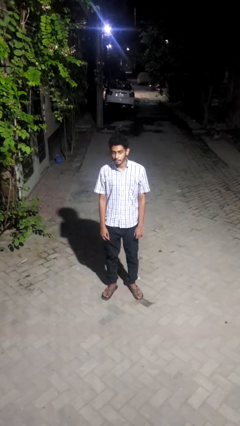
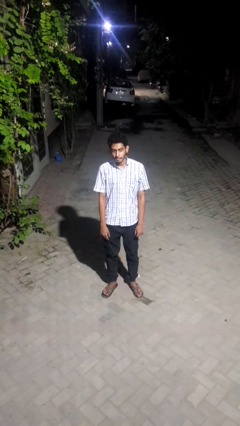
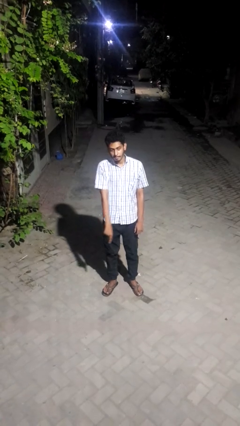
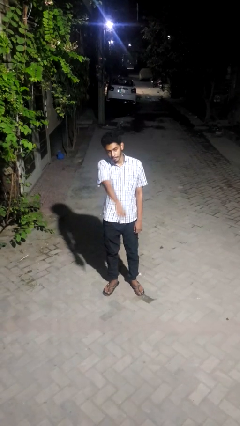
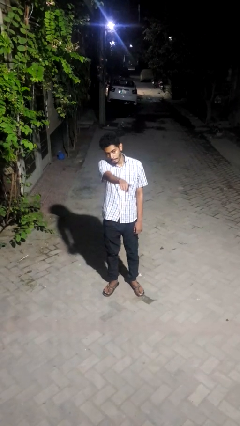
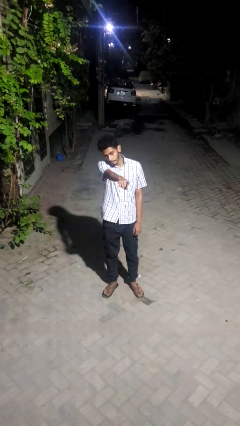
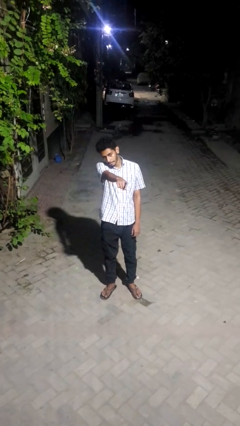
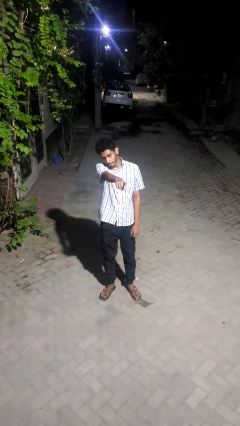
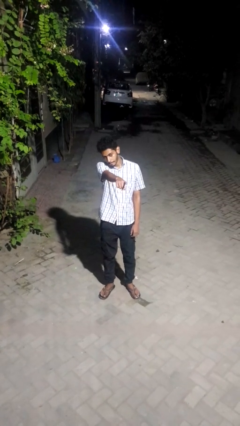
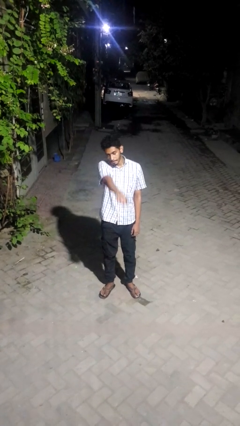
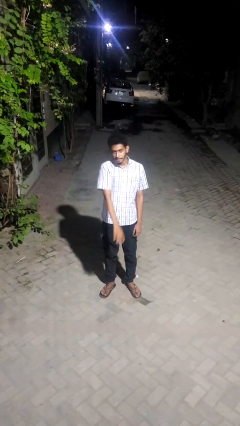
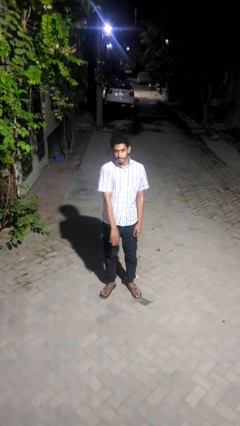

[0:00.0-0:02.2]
person points at person

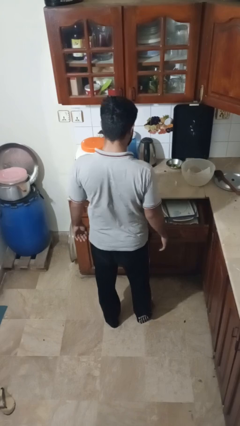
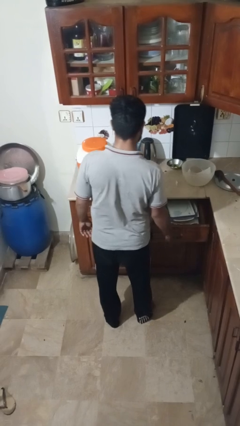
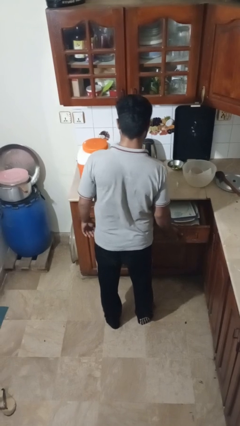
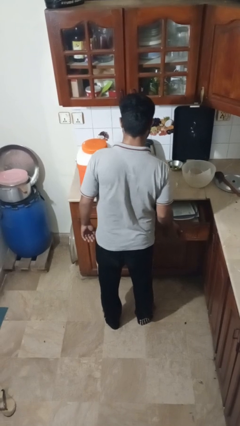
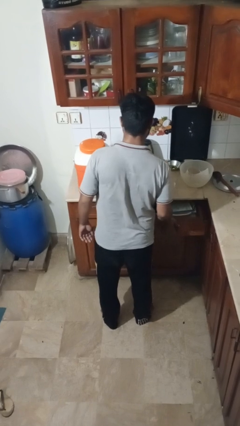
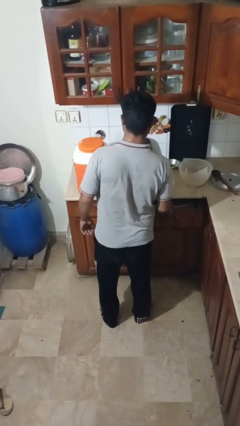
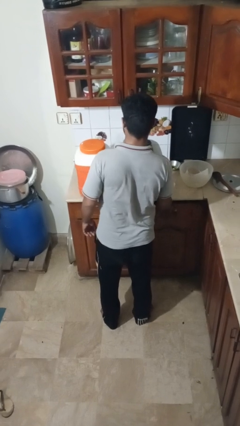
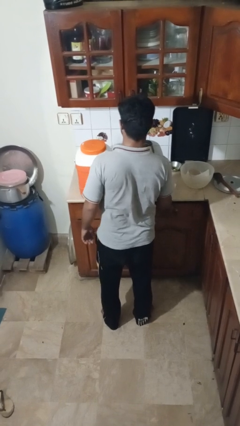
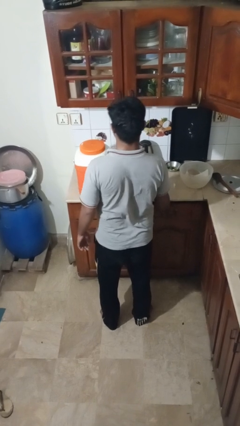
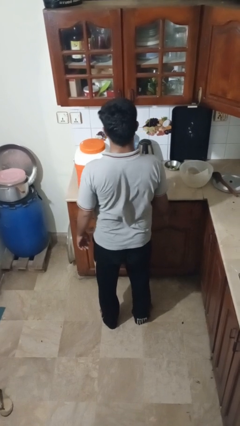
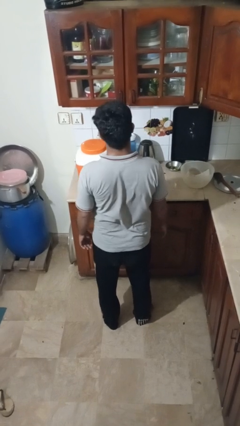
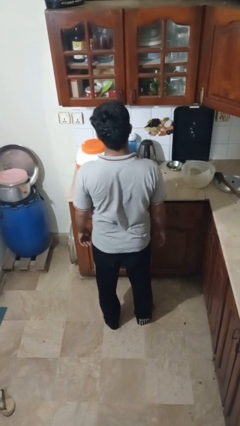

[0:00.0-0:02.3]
person closes kitchen drawer

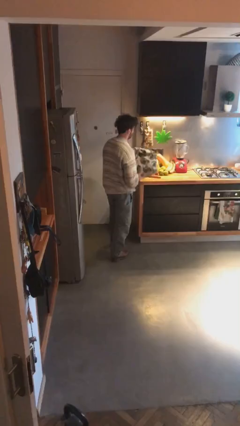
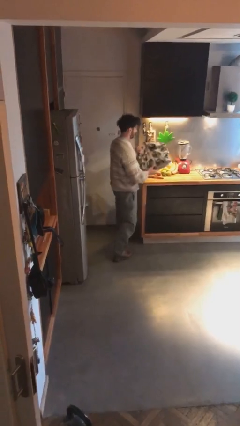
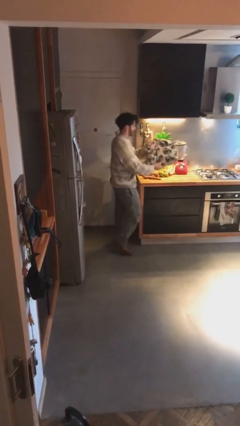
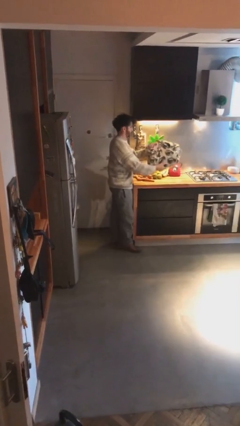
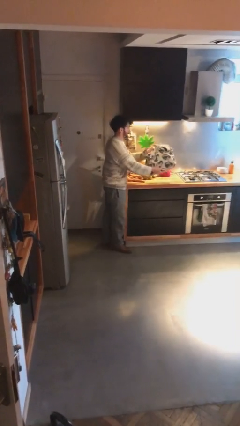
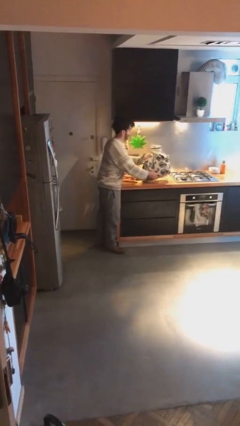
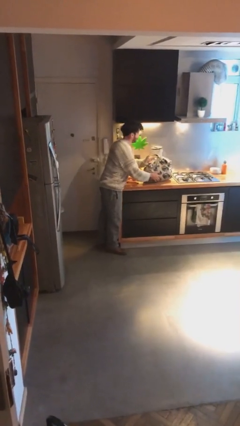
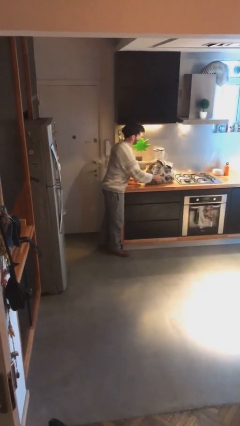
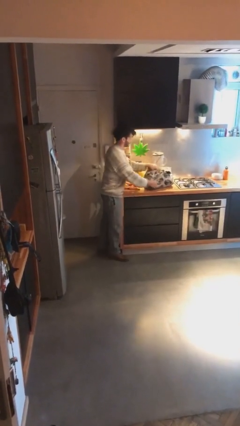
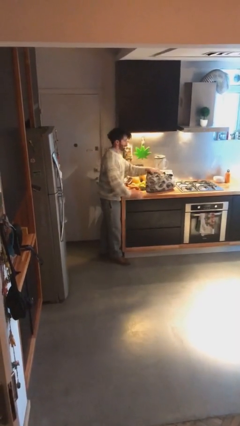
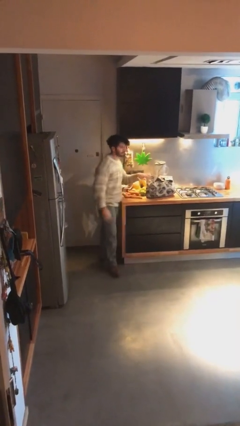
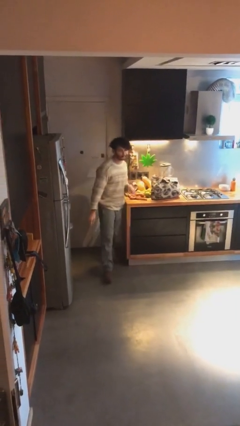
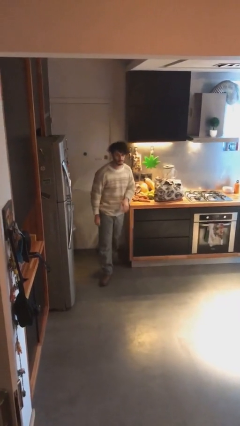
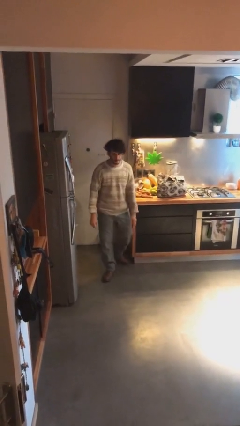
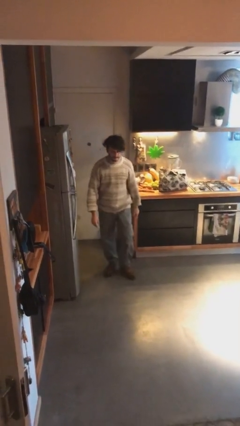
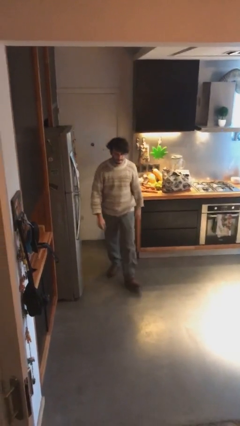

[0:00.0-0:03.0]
person puts down object on table

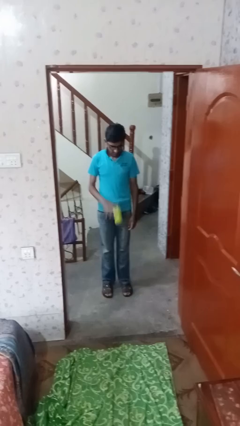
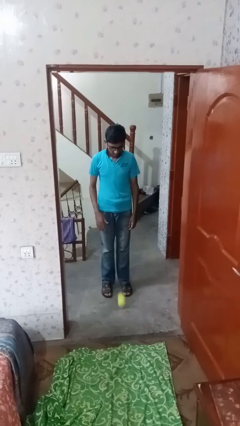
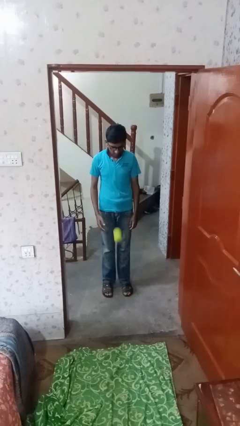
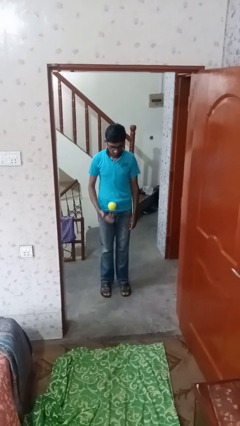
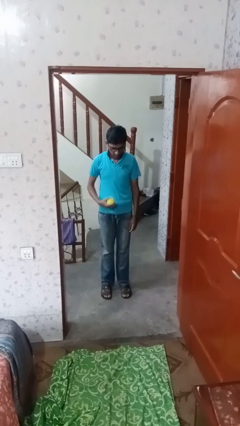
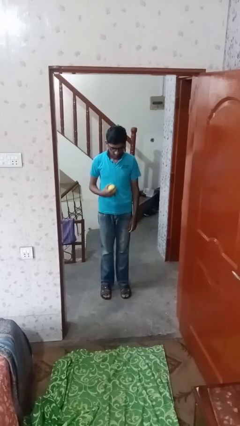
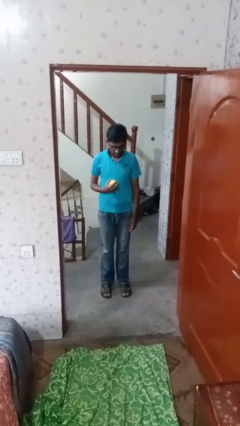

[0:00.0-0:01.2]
person bounces ball on floor

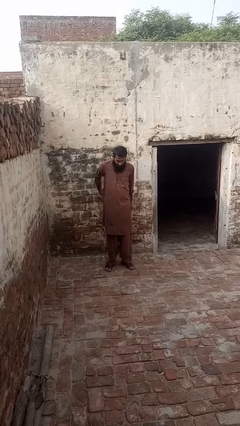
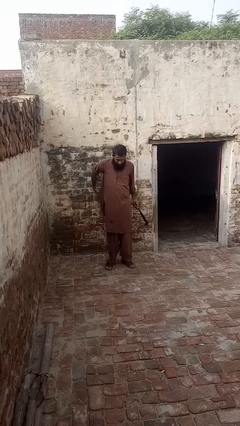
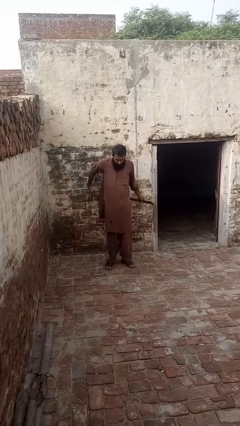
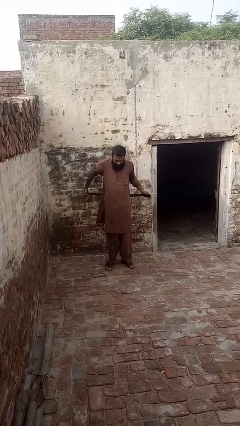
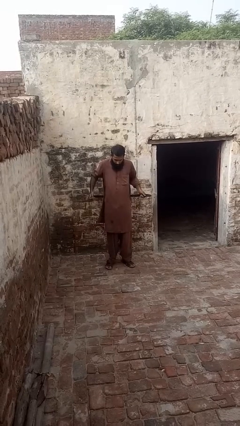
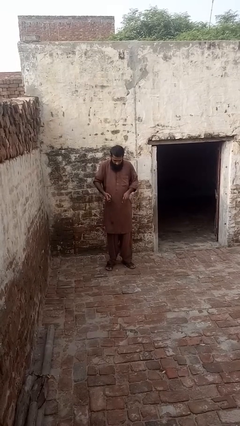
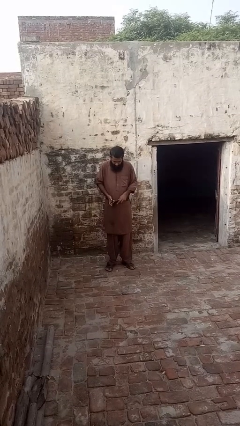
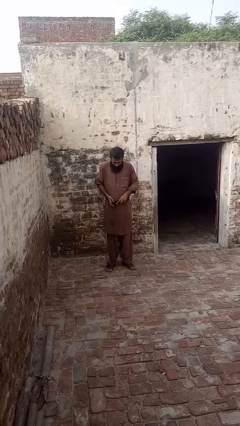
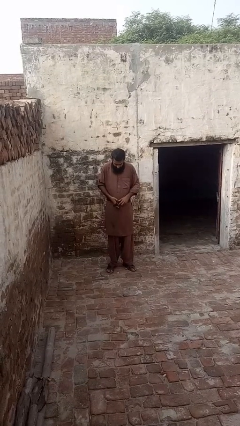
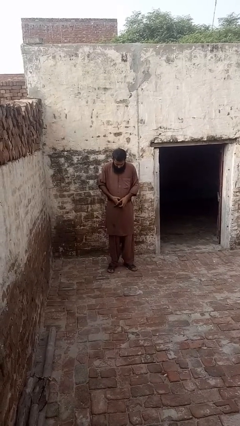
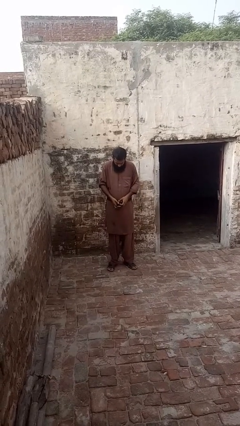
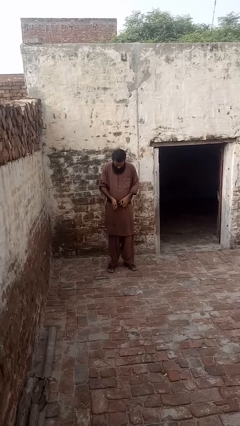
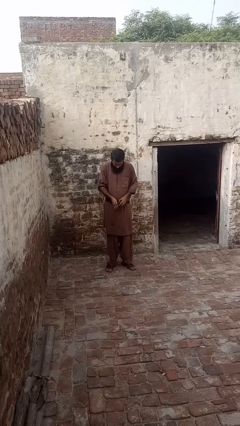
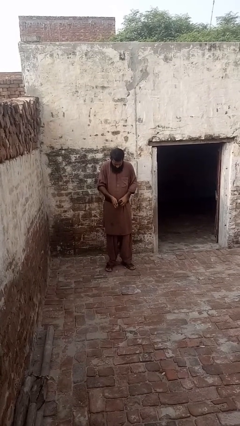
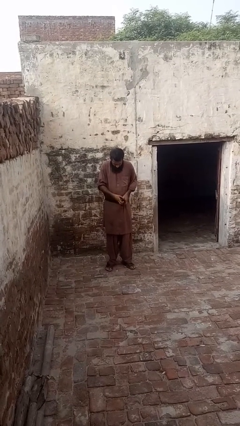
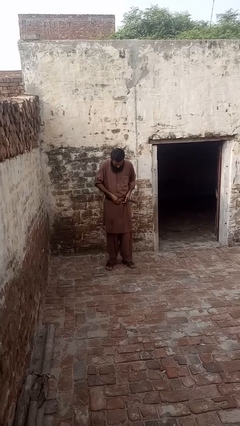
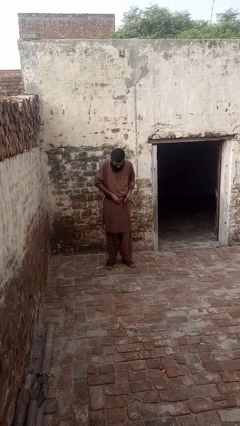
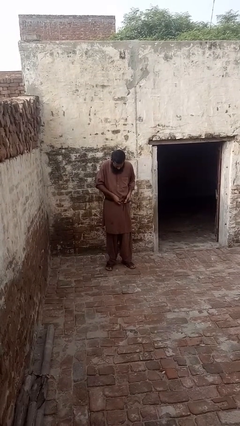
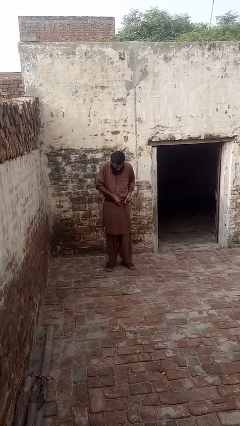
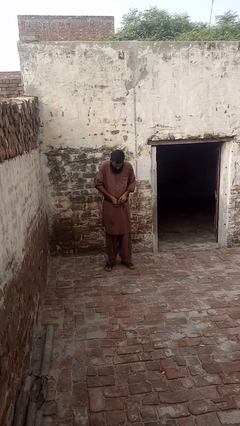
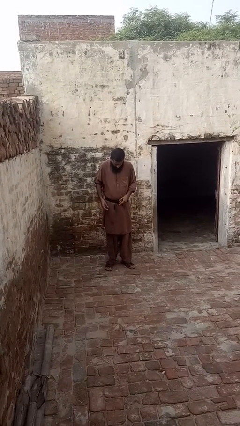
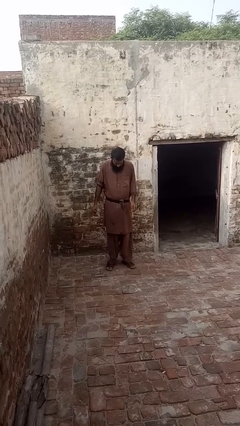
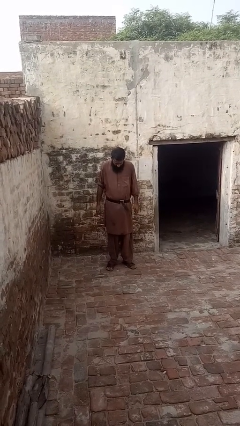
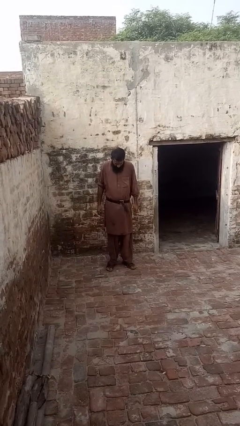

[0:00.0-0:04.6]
person puts on belt

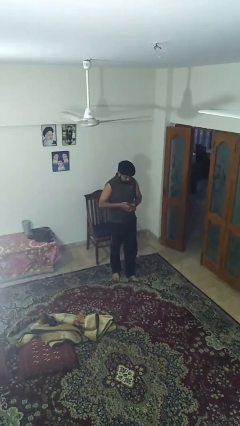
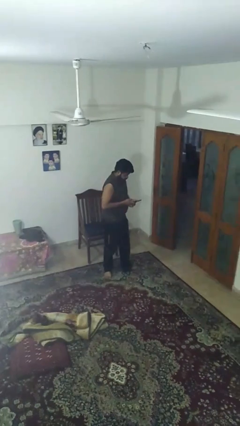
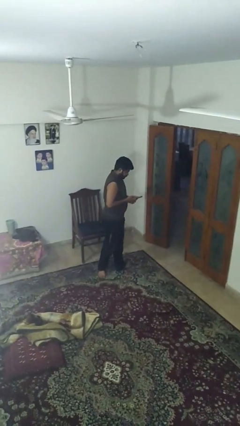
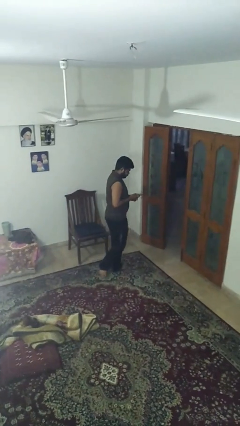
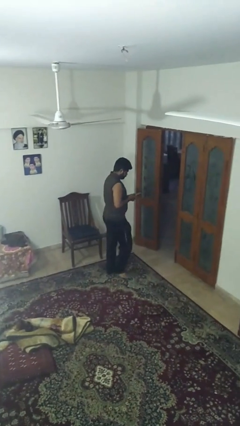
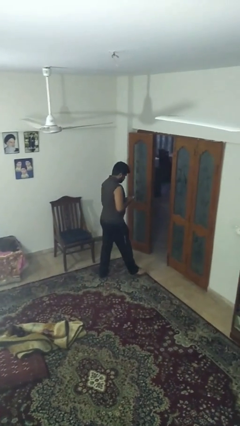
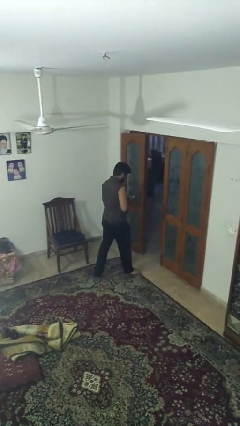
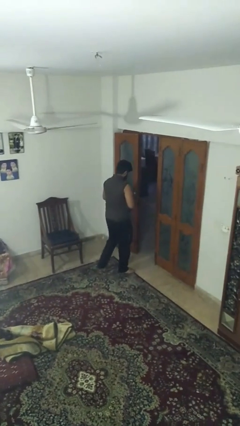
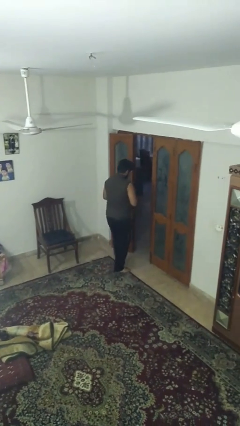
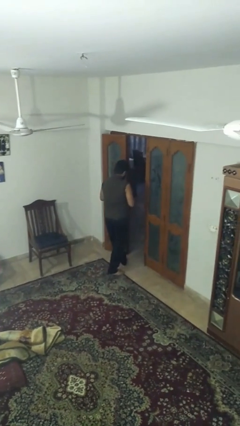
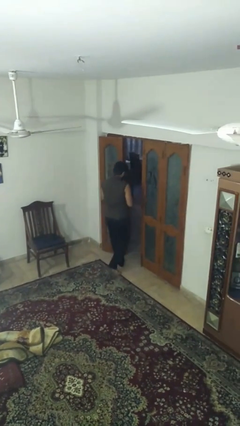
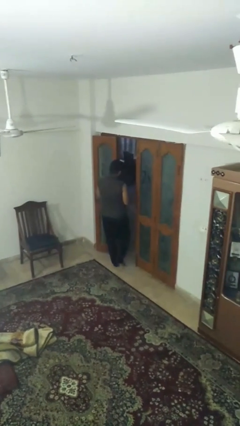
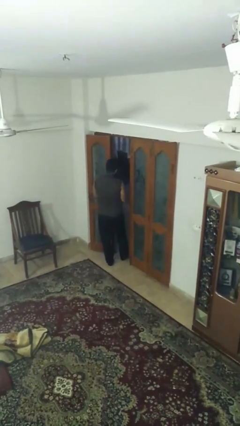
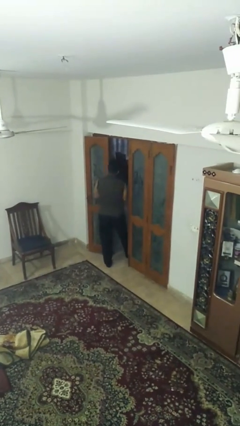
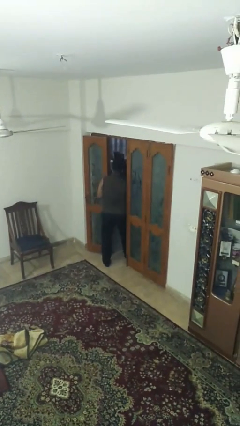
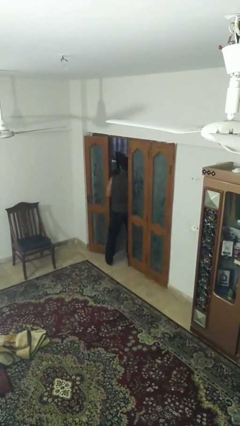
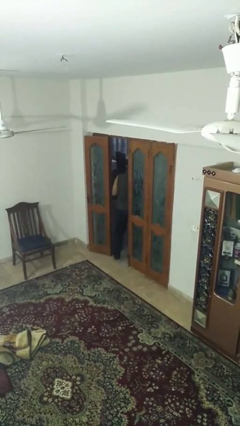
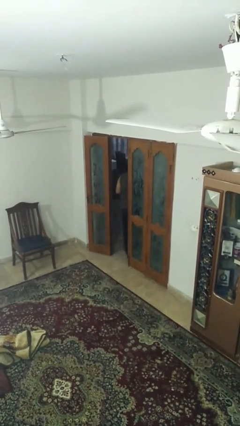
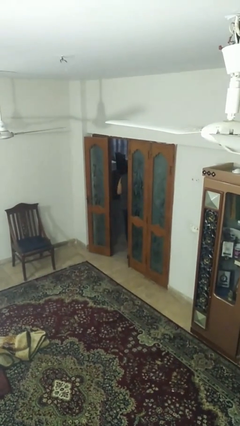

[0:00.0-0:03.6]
person exits scene through structure

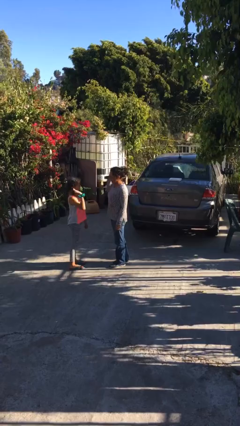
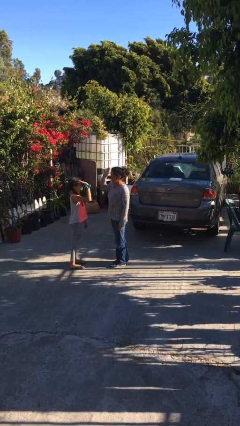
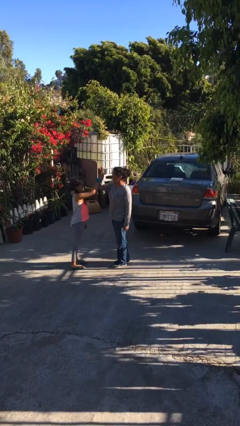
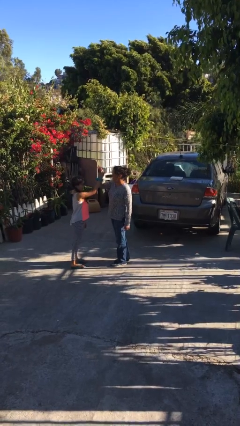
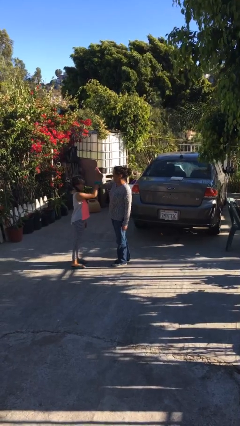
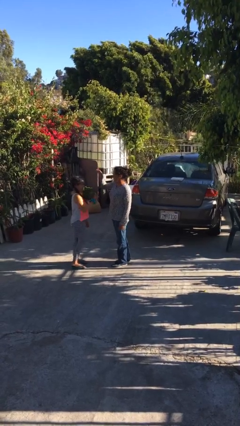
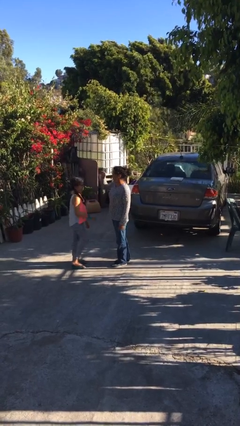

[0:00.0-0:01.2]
person highfives hand
